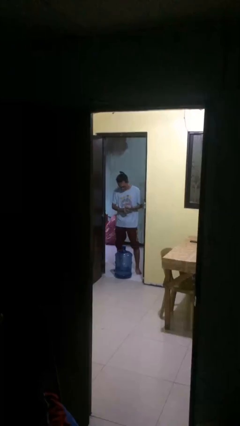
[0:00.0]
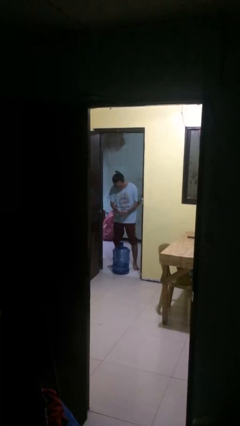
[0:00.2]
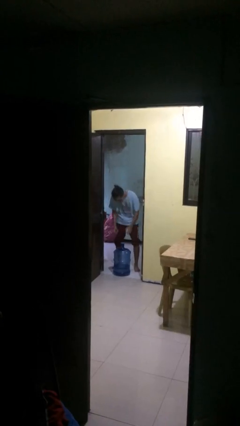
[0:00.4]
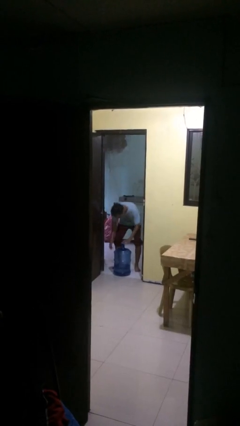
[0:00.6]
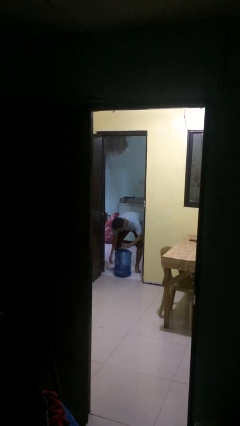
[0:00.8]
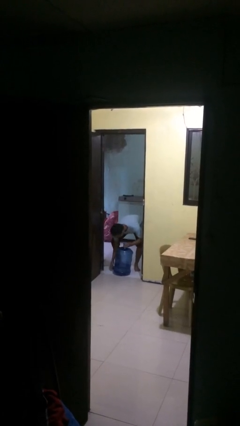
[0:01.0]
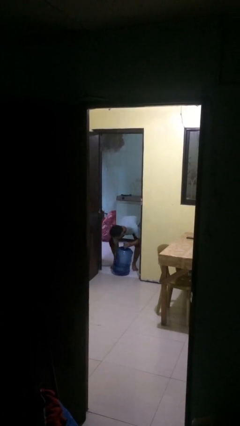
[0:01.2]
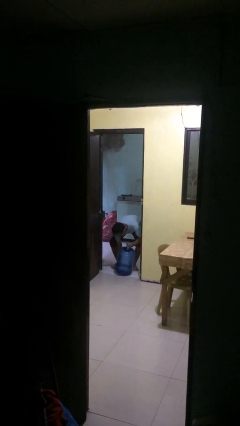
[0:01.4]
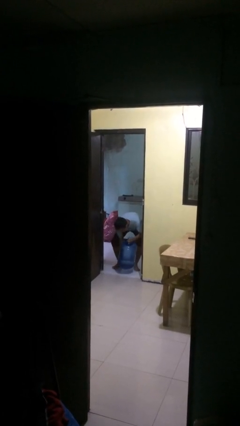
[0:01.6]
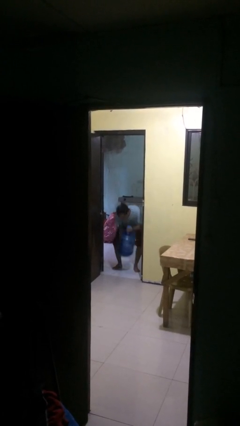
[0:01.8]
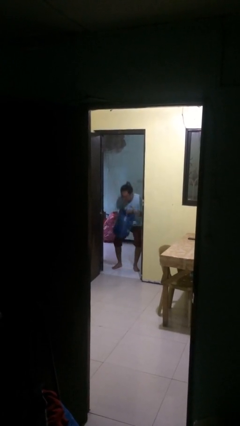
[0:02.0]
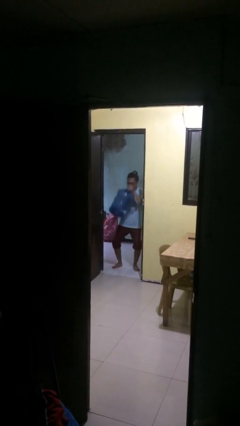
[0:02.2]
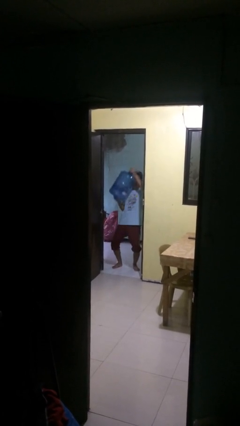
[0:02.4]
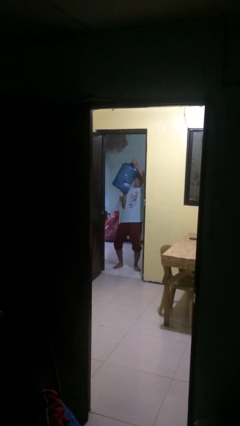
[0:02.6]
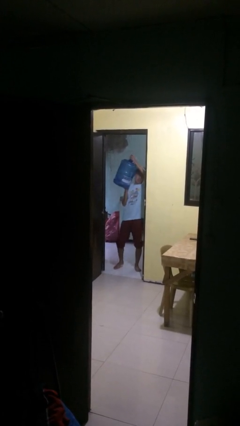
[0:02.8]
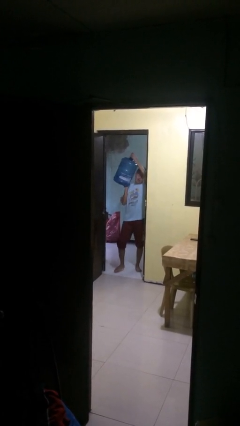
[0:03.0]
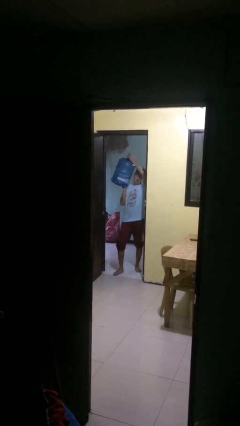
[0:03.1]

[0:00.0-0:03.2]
person picks up object from floor

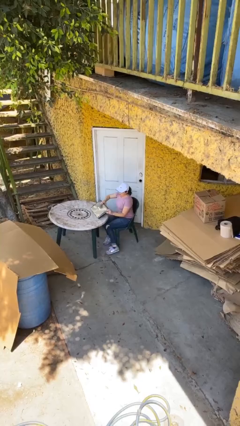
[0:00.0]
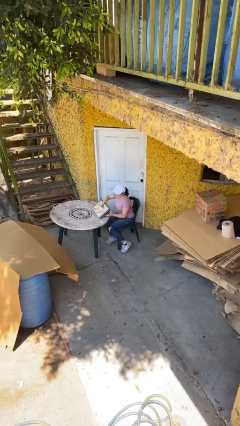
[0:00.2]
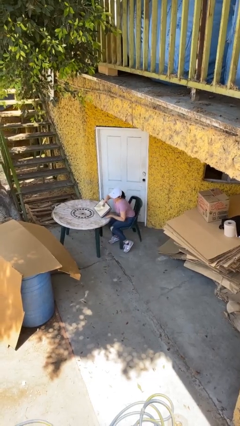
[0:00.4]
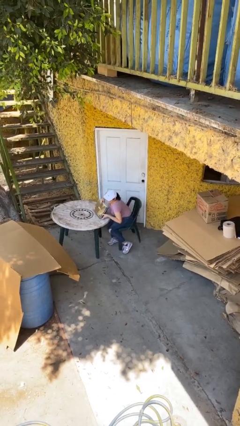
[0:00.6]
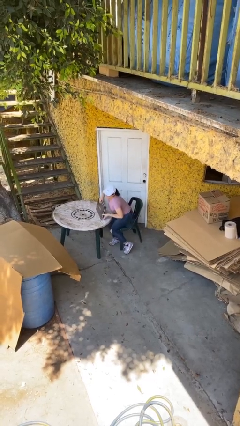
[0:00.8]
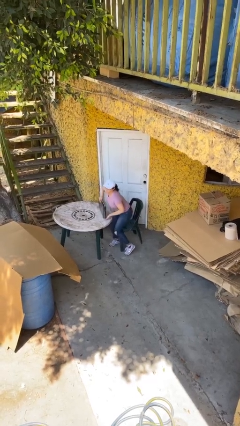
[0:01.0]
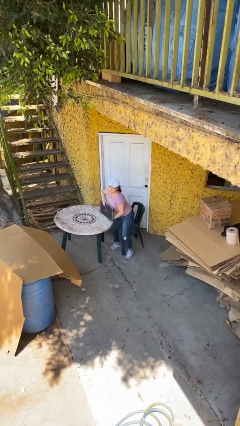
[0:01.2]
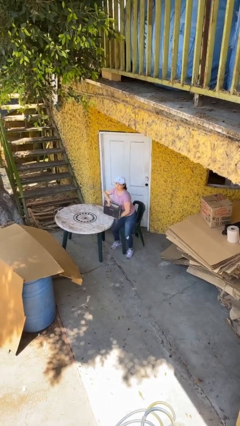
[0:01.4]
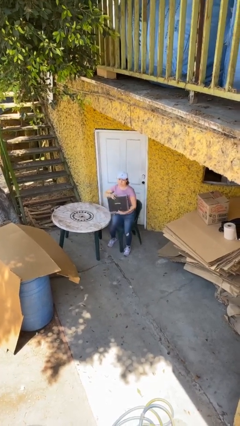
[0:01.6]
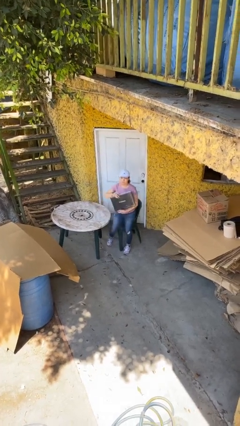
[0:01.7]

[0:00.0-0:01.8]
person stands up

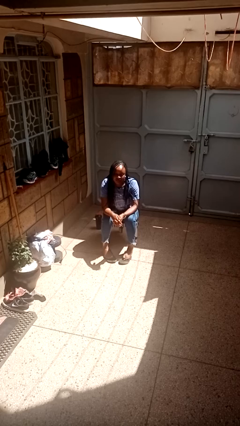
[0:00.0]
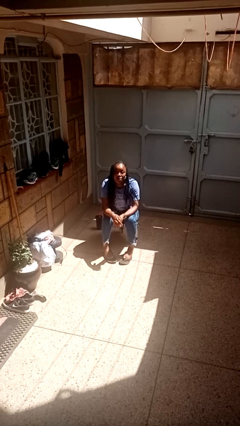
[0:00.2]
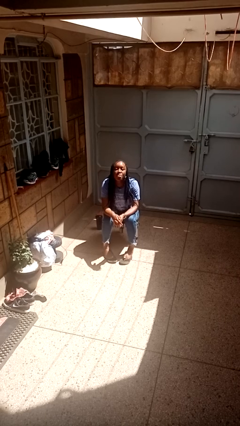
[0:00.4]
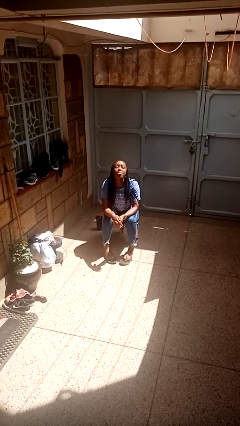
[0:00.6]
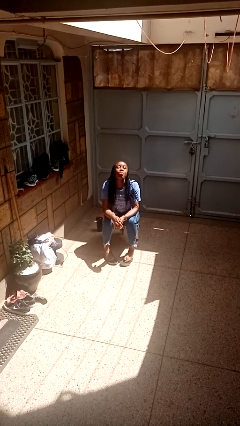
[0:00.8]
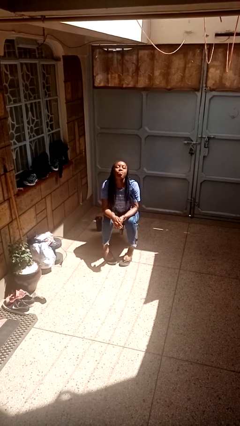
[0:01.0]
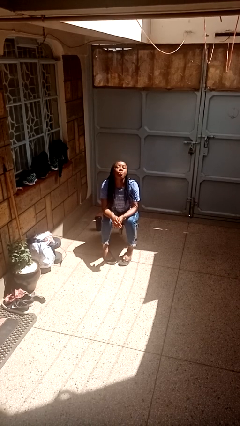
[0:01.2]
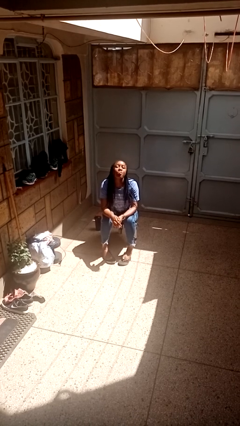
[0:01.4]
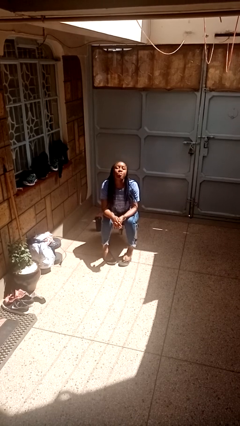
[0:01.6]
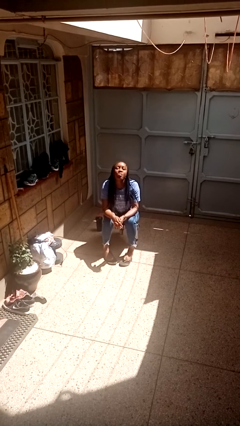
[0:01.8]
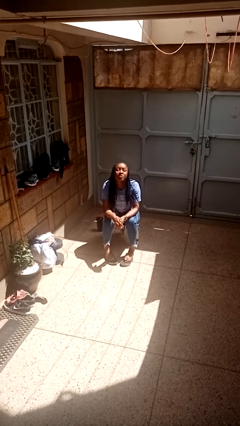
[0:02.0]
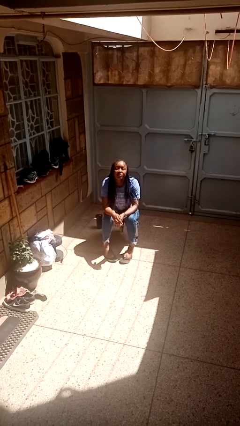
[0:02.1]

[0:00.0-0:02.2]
person sticks out tongue

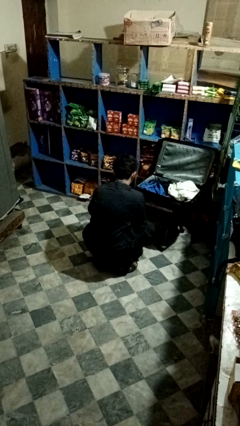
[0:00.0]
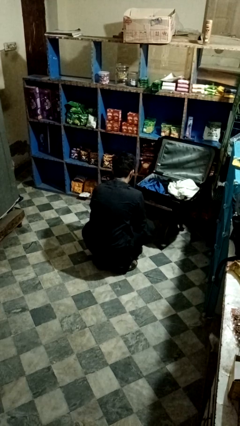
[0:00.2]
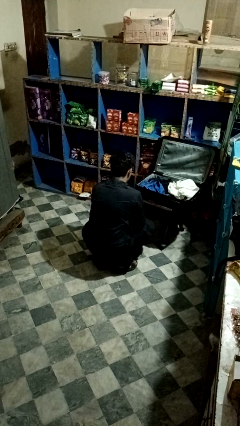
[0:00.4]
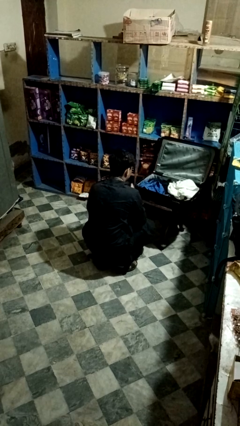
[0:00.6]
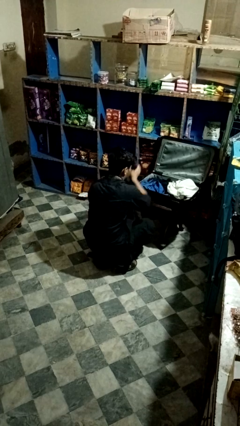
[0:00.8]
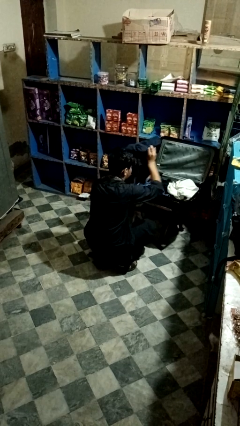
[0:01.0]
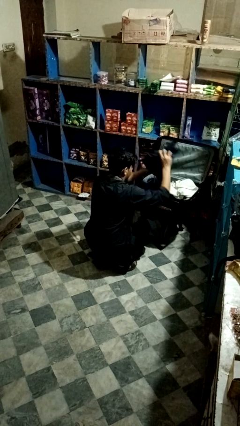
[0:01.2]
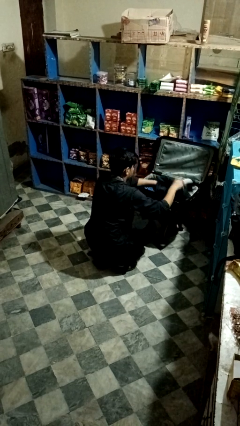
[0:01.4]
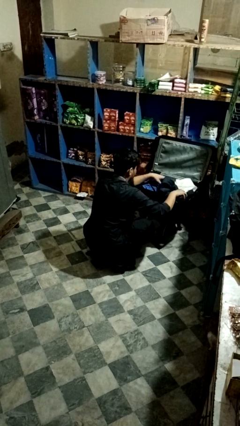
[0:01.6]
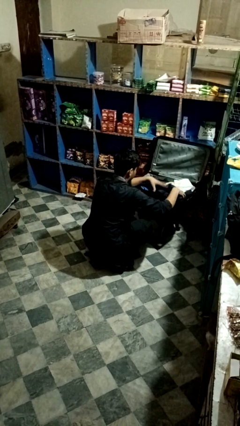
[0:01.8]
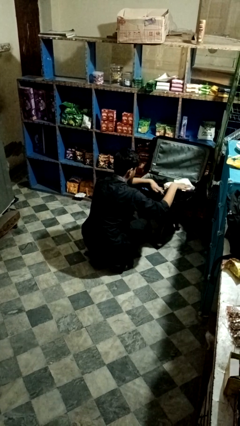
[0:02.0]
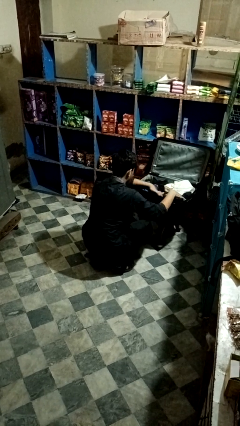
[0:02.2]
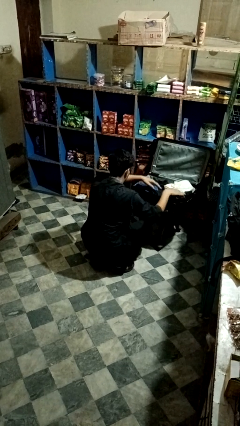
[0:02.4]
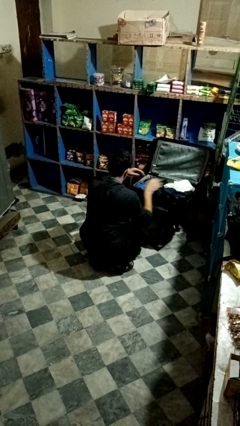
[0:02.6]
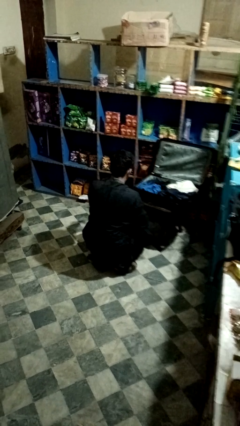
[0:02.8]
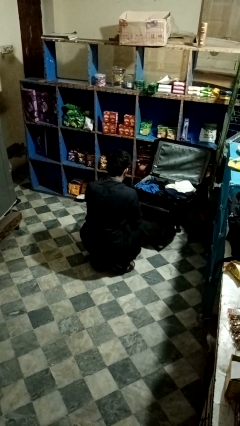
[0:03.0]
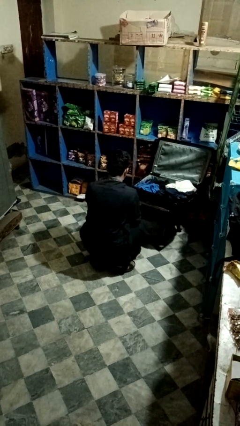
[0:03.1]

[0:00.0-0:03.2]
person loads clothes into suitcase

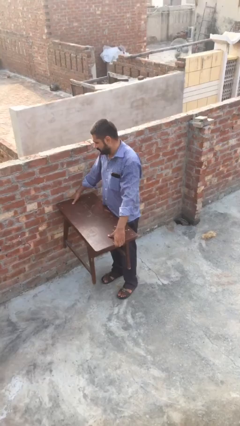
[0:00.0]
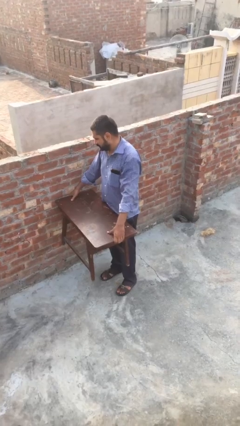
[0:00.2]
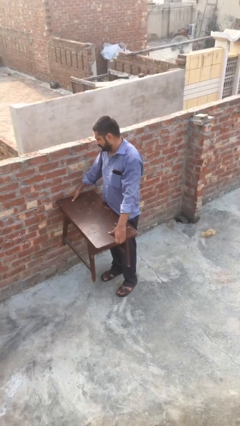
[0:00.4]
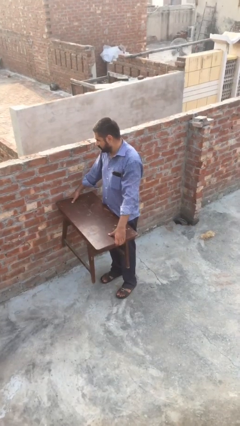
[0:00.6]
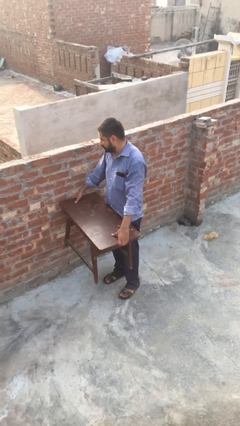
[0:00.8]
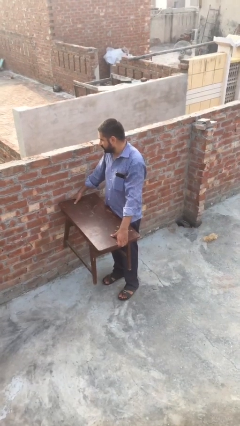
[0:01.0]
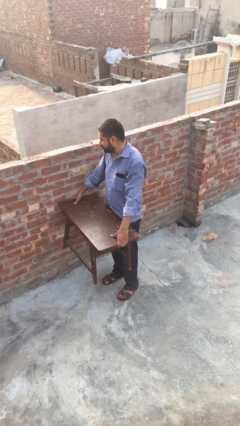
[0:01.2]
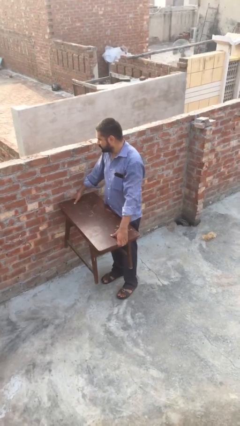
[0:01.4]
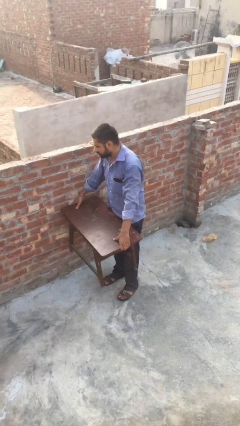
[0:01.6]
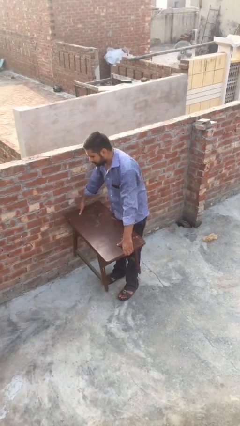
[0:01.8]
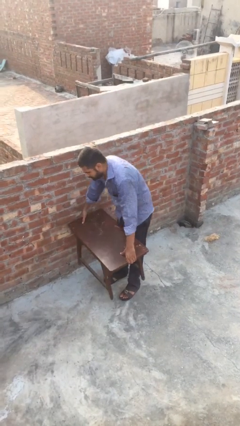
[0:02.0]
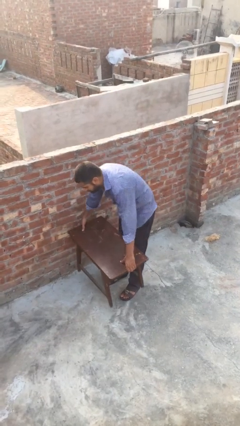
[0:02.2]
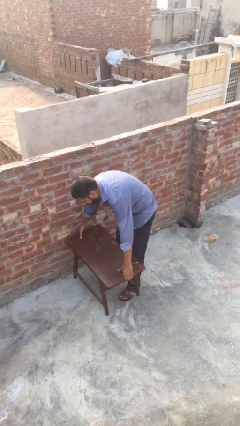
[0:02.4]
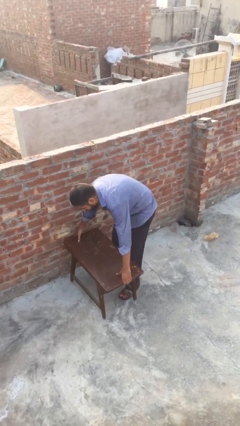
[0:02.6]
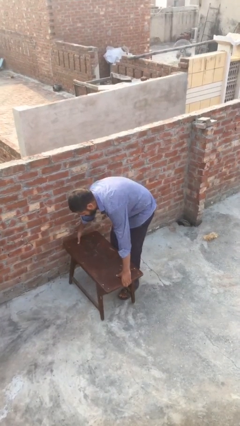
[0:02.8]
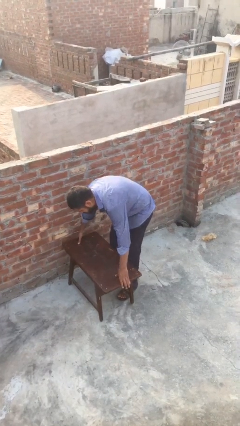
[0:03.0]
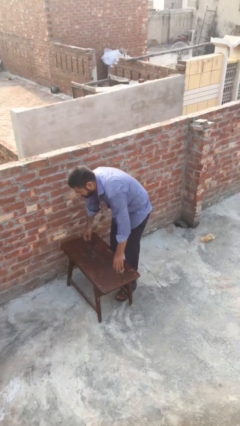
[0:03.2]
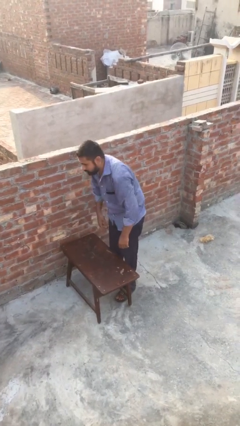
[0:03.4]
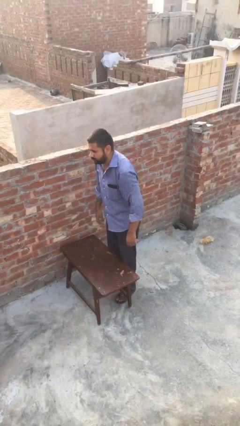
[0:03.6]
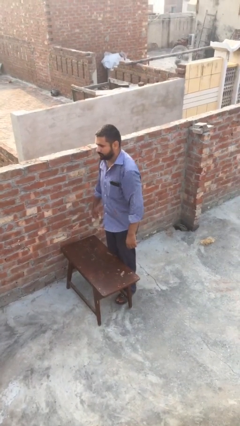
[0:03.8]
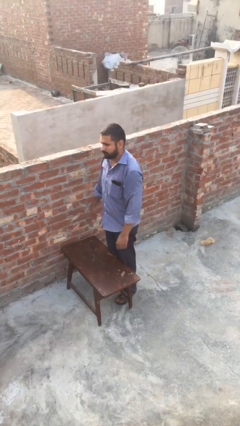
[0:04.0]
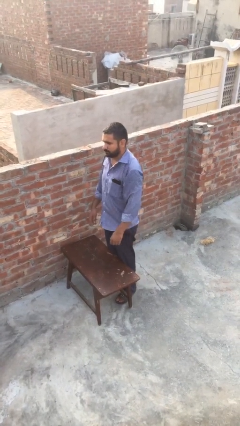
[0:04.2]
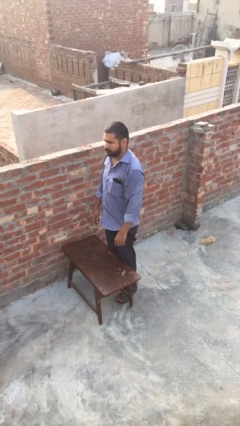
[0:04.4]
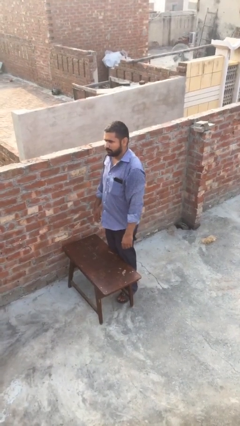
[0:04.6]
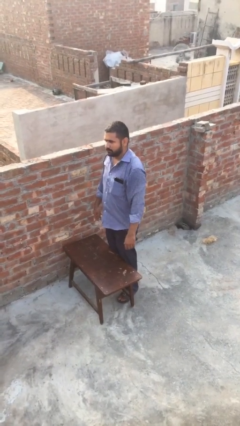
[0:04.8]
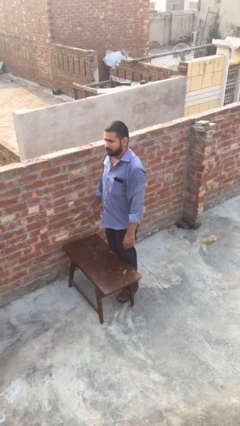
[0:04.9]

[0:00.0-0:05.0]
person puts down object on floor

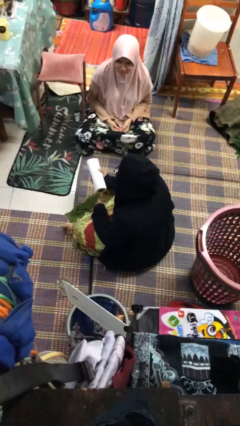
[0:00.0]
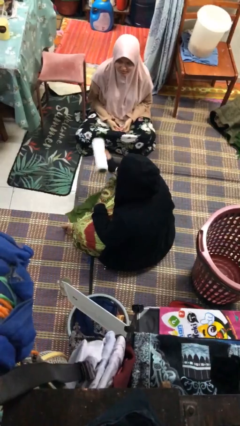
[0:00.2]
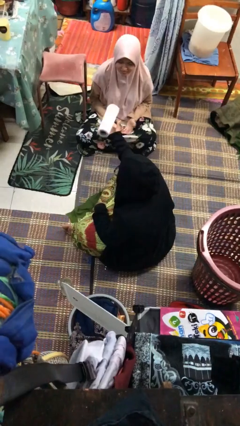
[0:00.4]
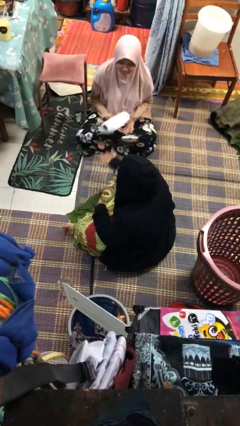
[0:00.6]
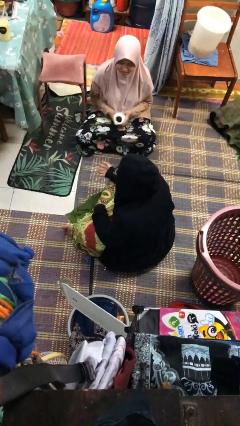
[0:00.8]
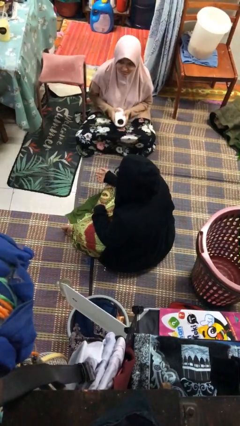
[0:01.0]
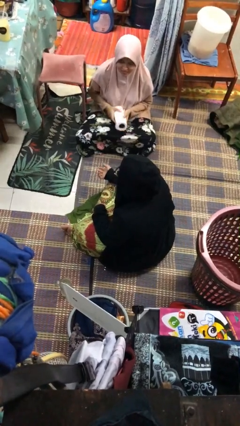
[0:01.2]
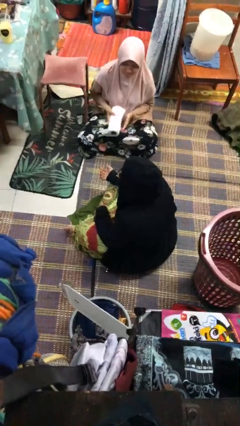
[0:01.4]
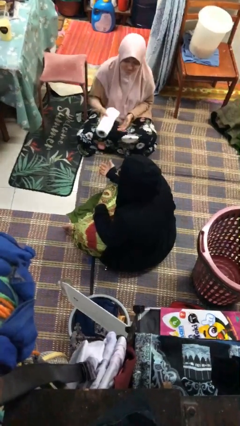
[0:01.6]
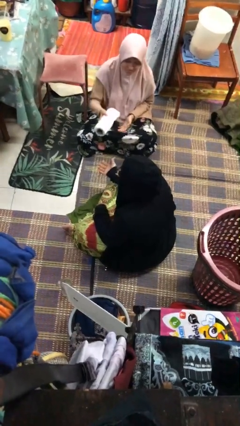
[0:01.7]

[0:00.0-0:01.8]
person throws object to person
